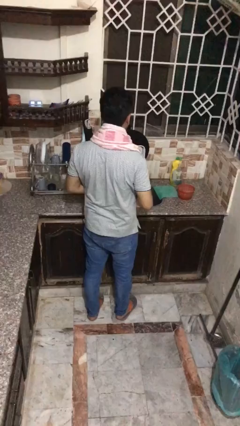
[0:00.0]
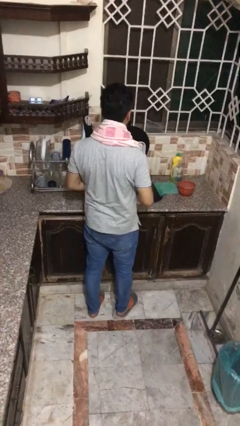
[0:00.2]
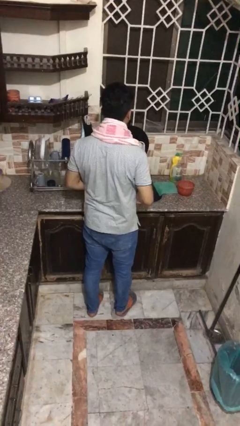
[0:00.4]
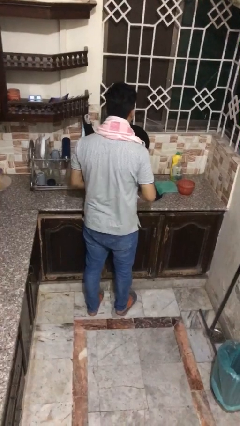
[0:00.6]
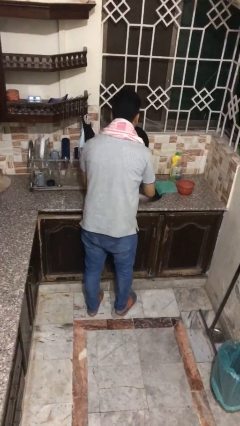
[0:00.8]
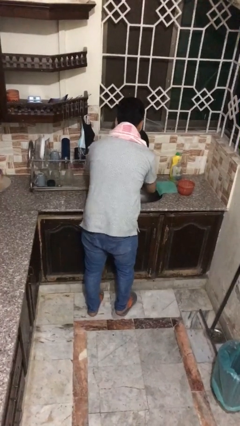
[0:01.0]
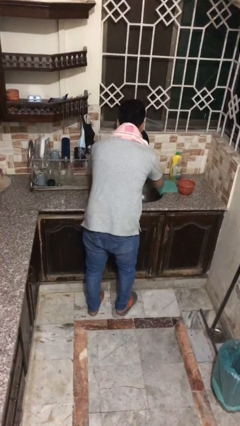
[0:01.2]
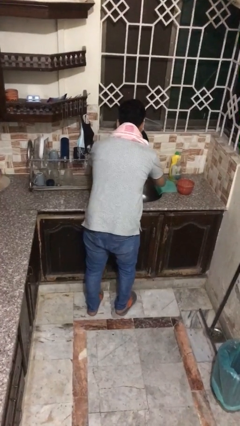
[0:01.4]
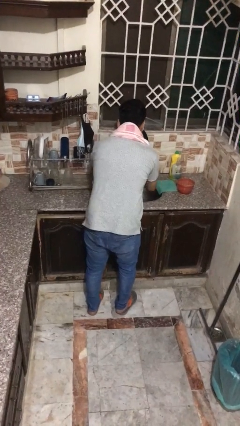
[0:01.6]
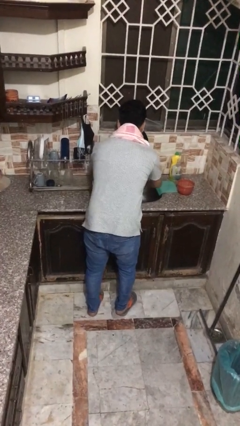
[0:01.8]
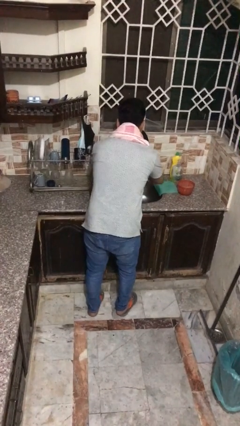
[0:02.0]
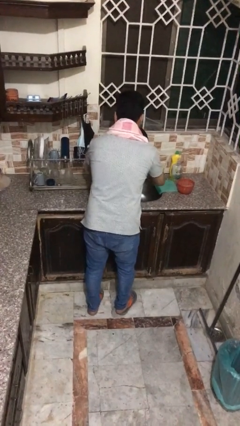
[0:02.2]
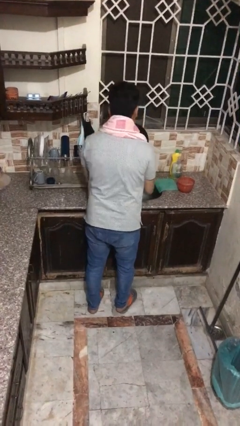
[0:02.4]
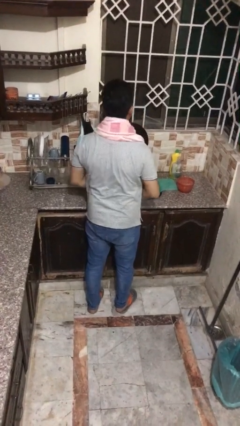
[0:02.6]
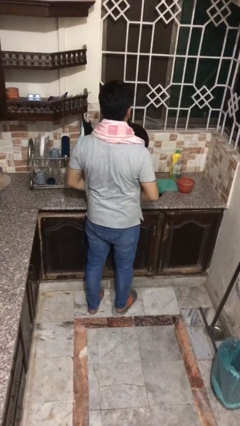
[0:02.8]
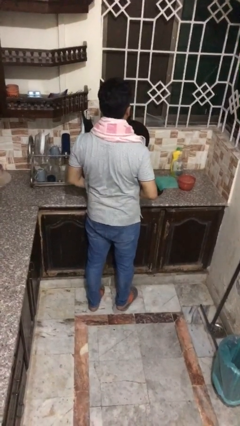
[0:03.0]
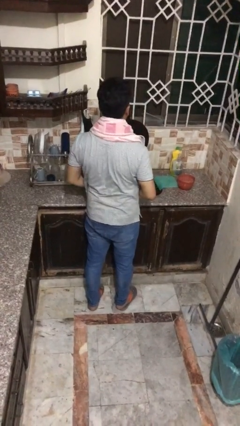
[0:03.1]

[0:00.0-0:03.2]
person washes face

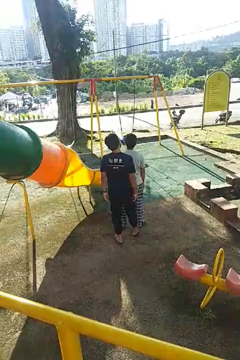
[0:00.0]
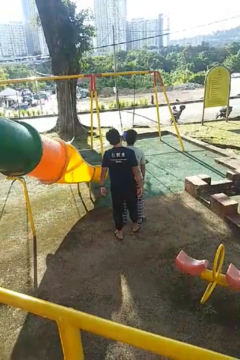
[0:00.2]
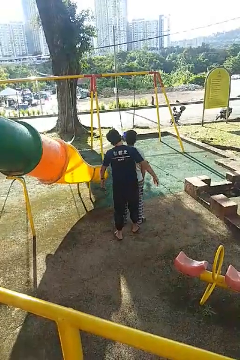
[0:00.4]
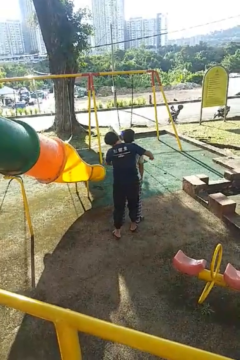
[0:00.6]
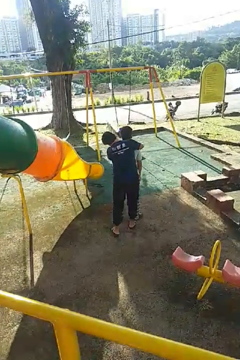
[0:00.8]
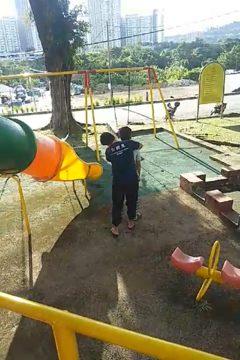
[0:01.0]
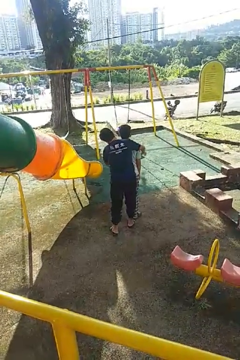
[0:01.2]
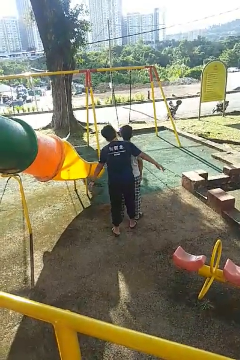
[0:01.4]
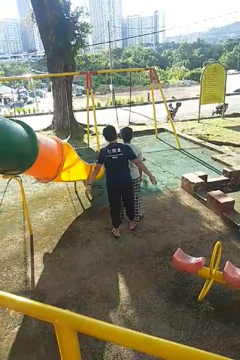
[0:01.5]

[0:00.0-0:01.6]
person hugs person from behind

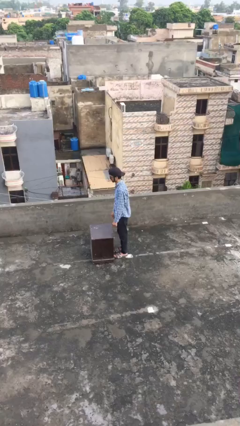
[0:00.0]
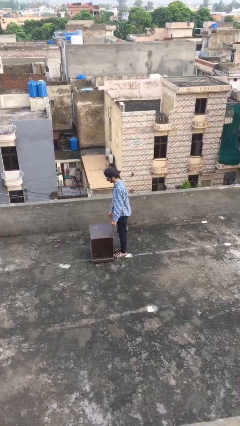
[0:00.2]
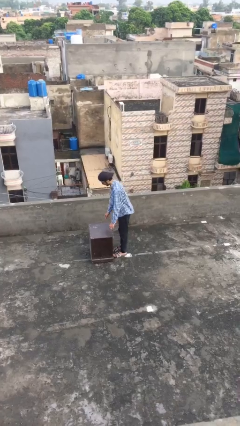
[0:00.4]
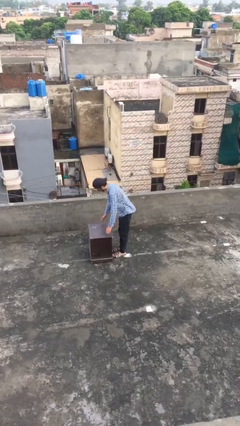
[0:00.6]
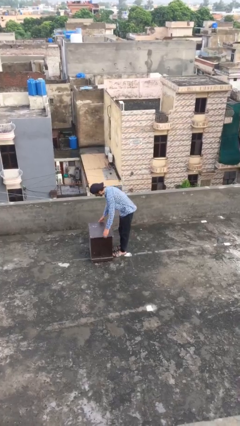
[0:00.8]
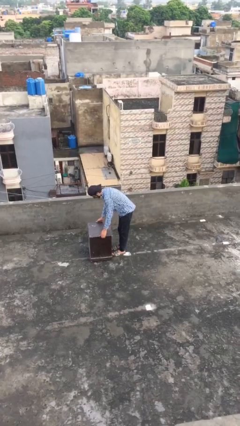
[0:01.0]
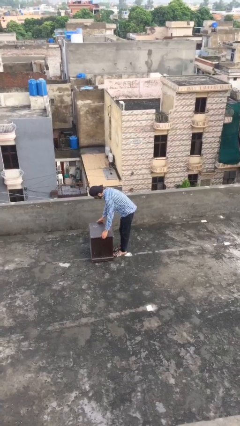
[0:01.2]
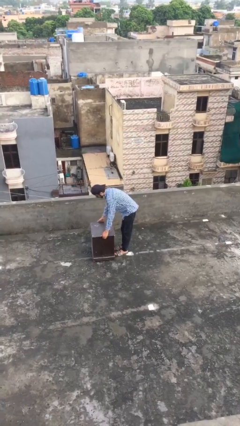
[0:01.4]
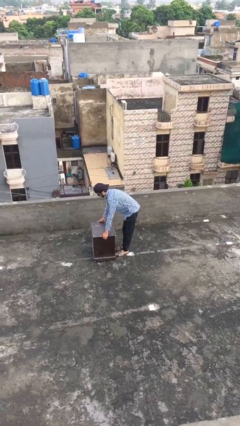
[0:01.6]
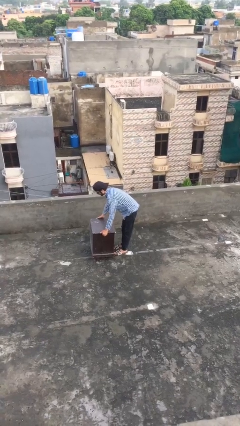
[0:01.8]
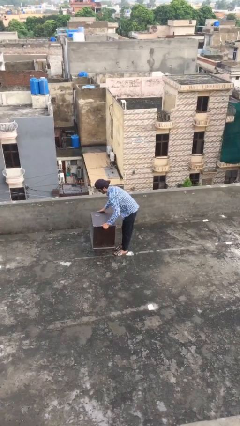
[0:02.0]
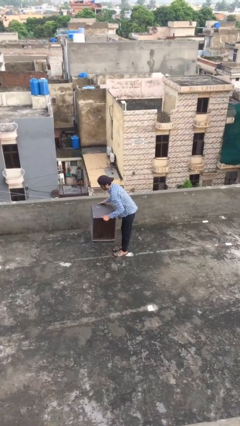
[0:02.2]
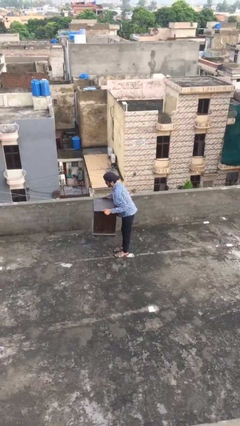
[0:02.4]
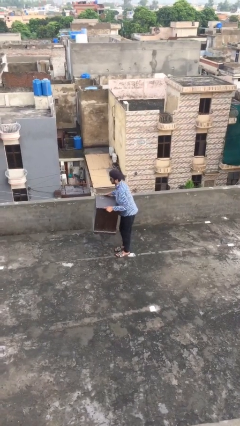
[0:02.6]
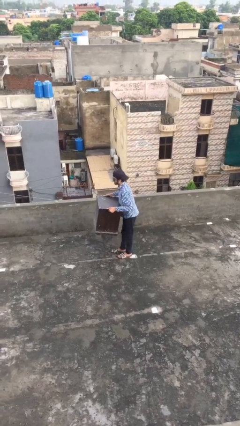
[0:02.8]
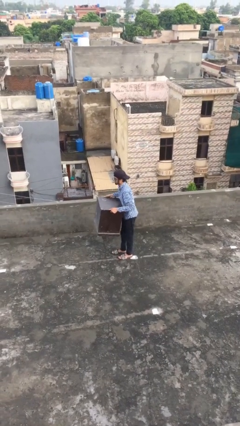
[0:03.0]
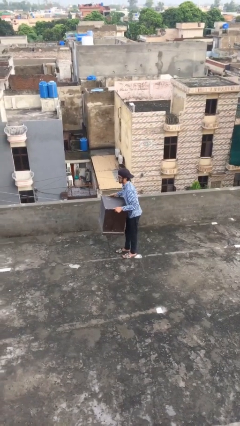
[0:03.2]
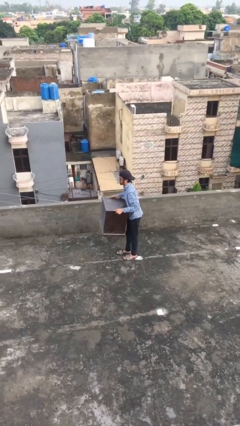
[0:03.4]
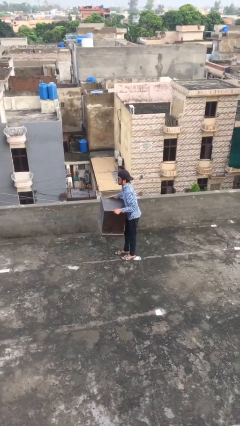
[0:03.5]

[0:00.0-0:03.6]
person picks up object from floor

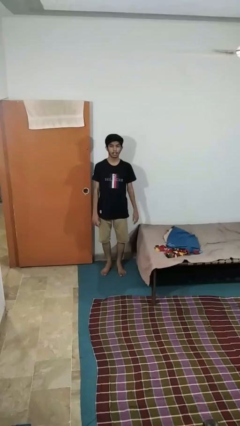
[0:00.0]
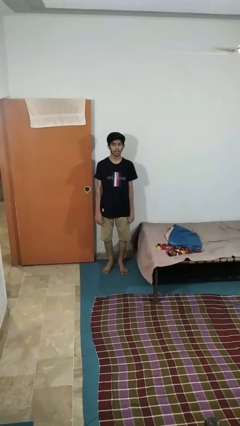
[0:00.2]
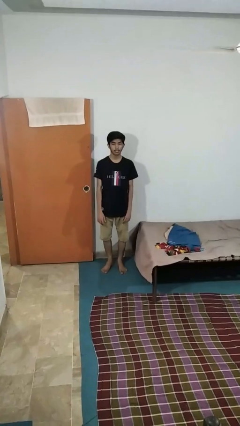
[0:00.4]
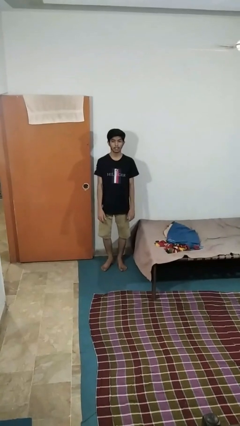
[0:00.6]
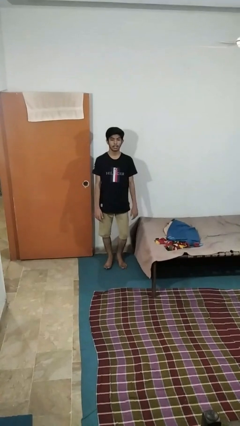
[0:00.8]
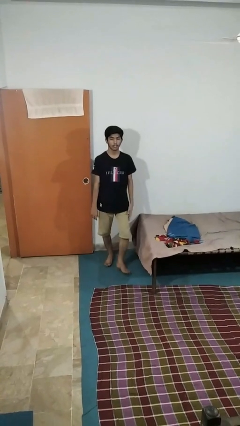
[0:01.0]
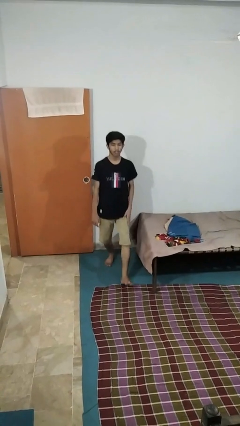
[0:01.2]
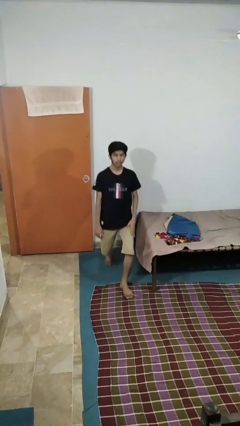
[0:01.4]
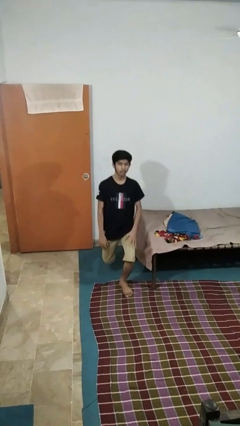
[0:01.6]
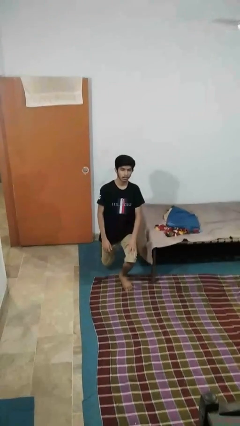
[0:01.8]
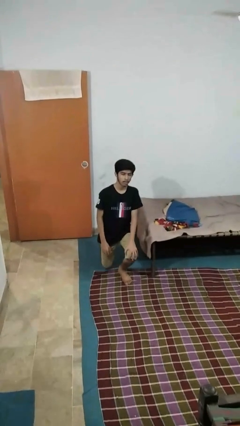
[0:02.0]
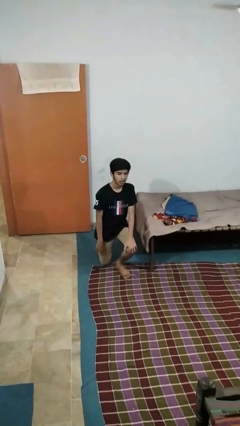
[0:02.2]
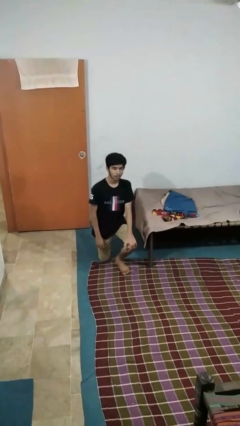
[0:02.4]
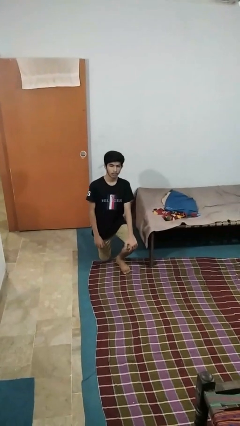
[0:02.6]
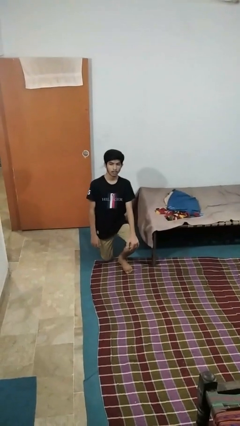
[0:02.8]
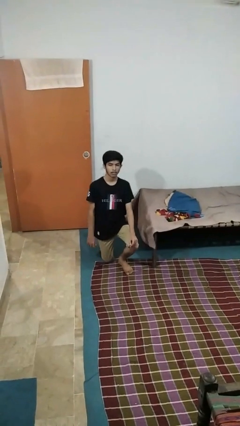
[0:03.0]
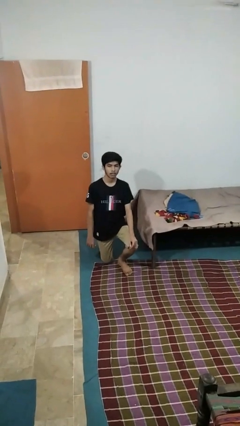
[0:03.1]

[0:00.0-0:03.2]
person kneels

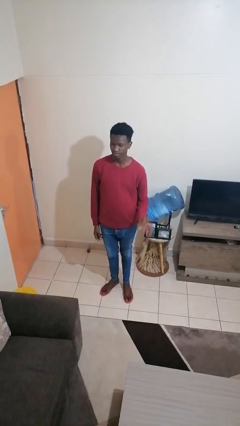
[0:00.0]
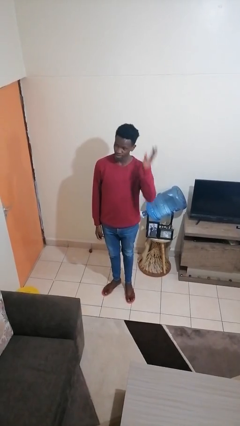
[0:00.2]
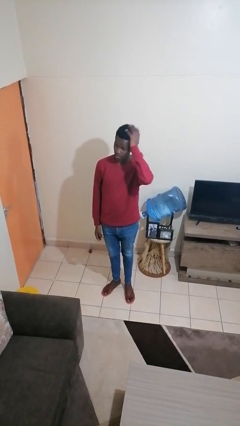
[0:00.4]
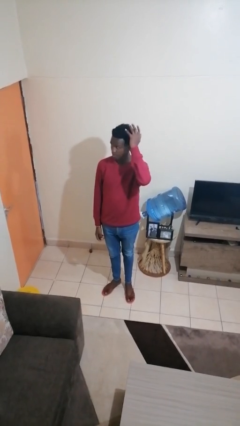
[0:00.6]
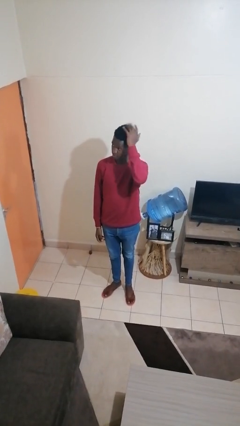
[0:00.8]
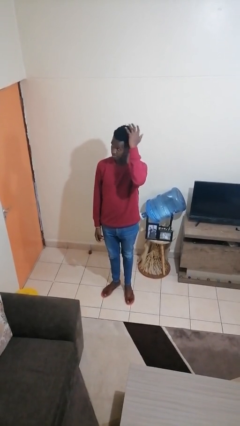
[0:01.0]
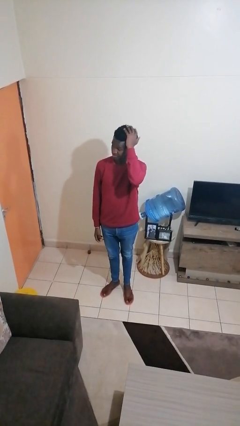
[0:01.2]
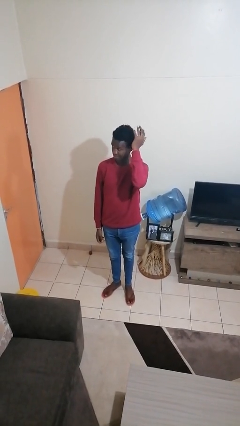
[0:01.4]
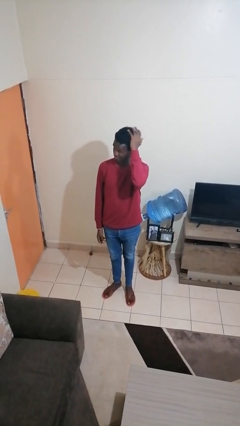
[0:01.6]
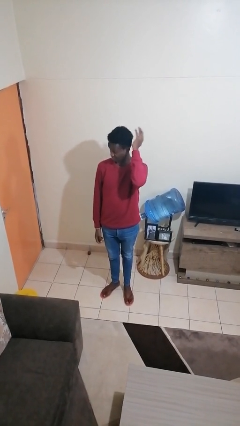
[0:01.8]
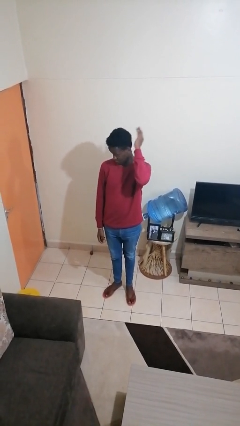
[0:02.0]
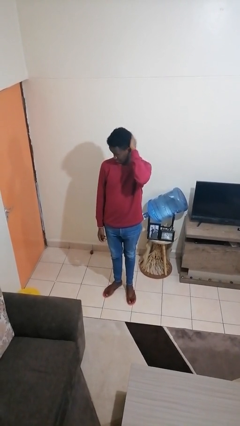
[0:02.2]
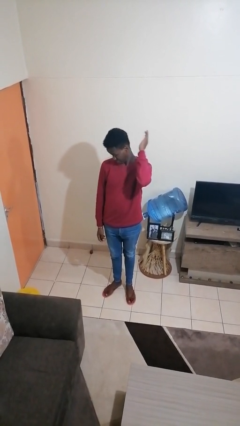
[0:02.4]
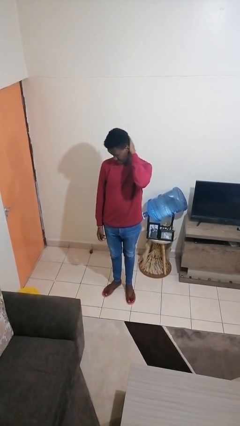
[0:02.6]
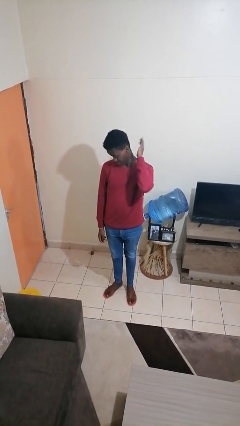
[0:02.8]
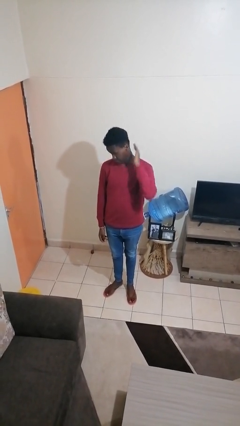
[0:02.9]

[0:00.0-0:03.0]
person pats head

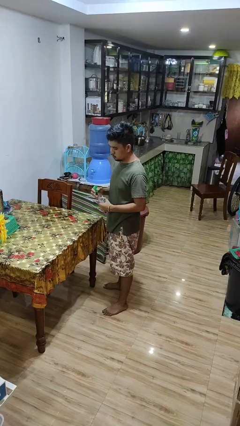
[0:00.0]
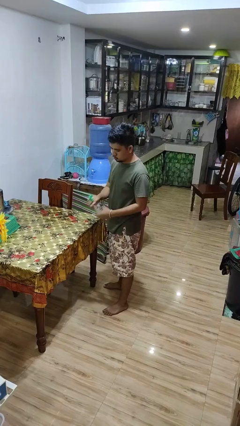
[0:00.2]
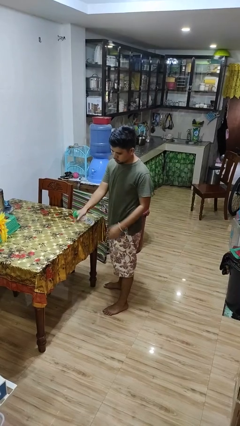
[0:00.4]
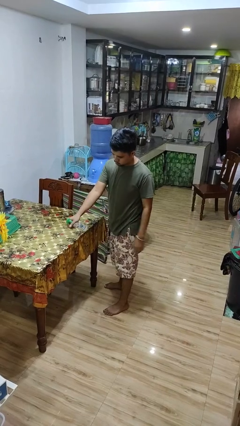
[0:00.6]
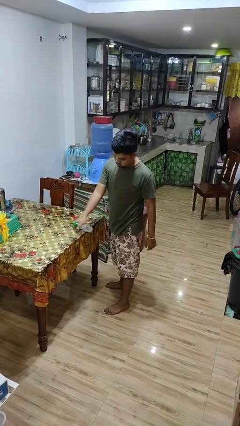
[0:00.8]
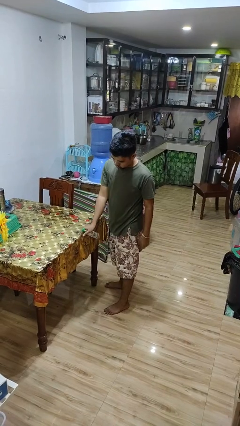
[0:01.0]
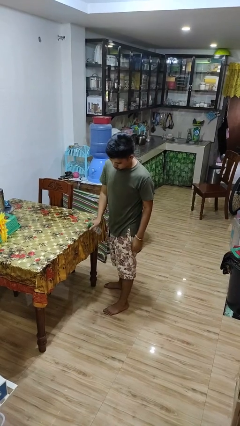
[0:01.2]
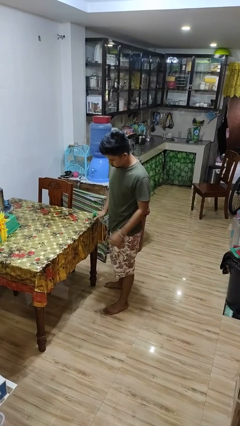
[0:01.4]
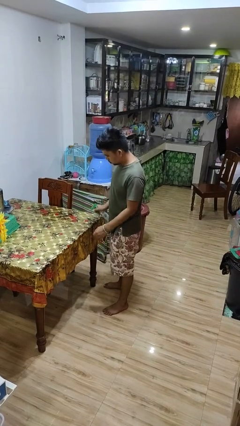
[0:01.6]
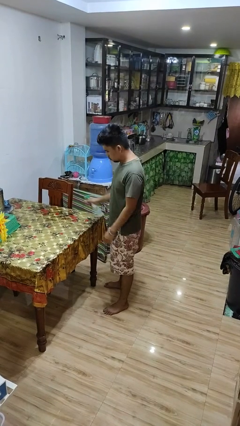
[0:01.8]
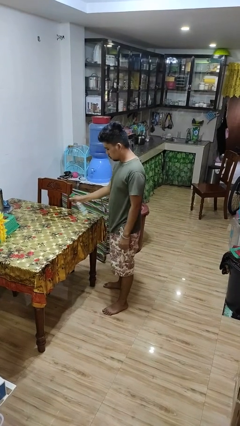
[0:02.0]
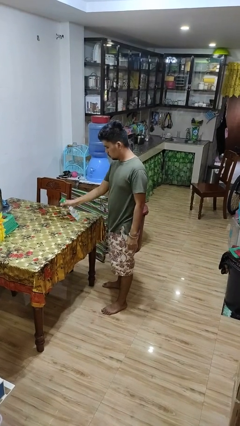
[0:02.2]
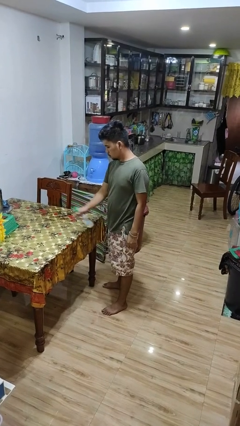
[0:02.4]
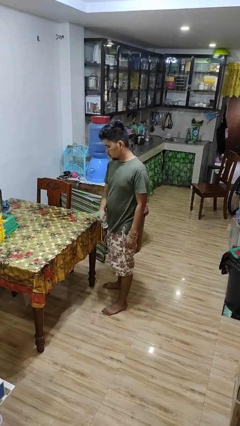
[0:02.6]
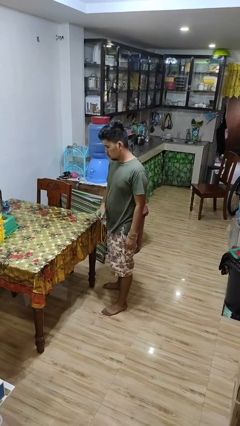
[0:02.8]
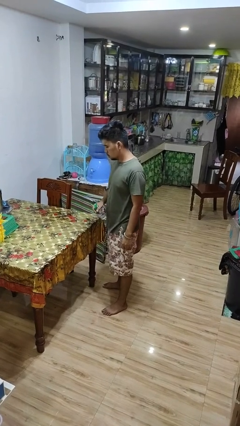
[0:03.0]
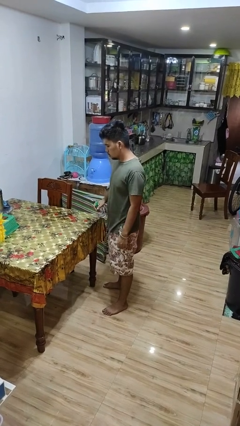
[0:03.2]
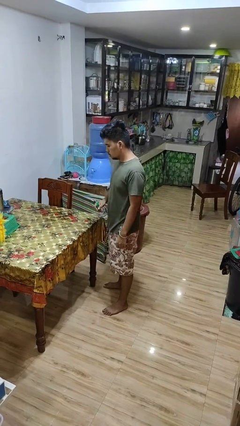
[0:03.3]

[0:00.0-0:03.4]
person sprays from bottle
